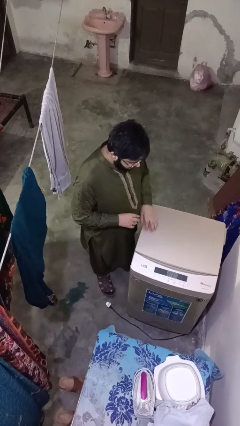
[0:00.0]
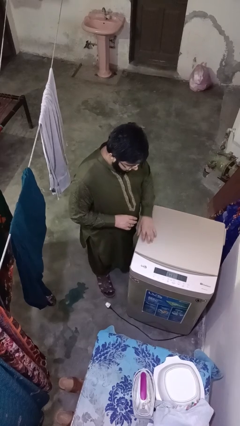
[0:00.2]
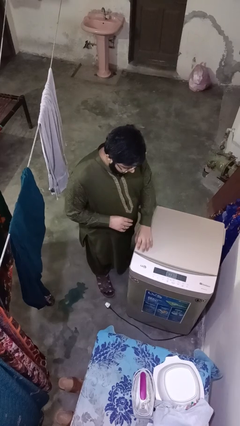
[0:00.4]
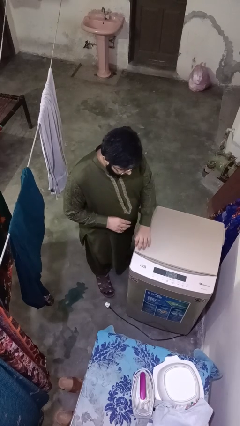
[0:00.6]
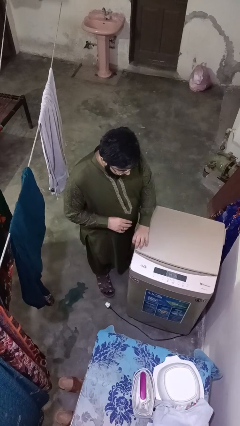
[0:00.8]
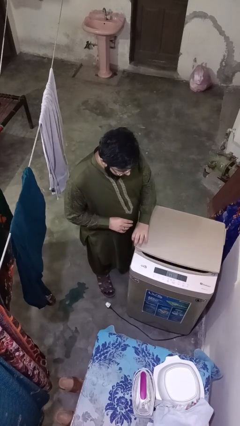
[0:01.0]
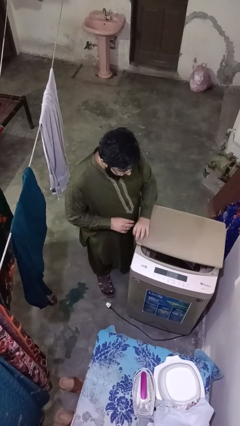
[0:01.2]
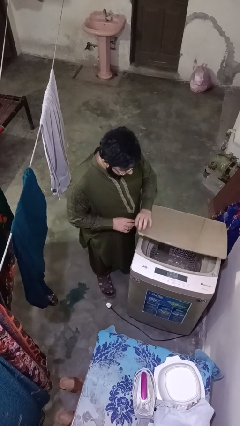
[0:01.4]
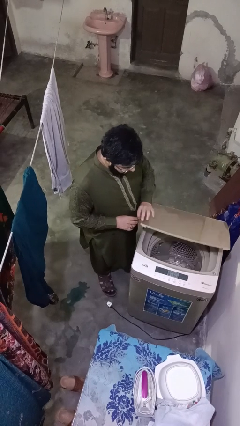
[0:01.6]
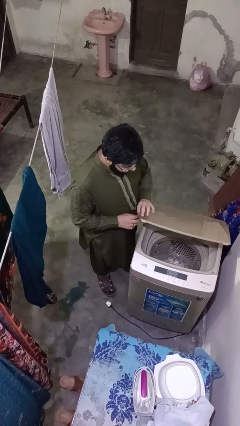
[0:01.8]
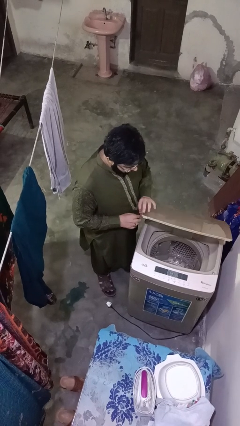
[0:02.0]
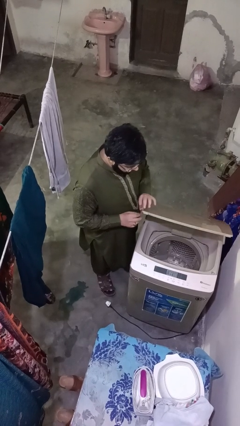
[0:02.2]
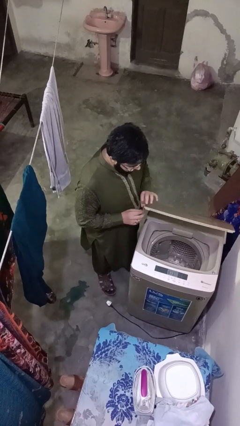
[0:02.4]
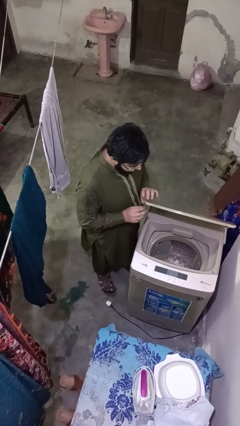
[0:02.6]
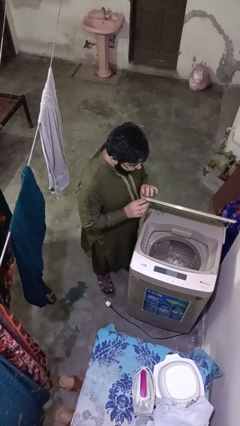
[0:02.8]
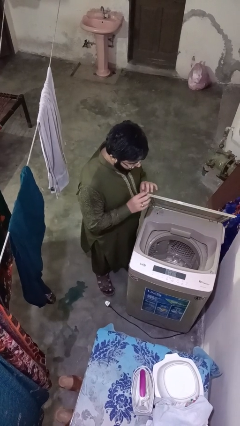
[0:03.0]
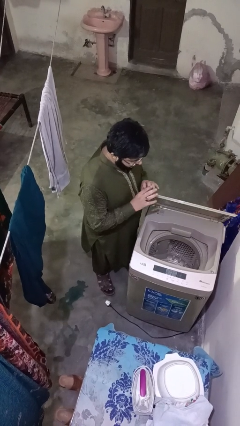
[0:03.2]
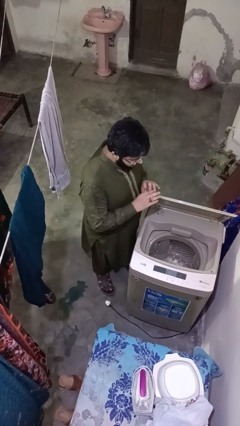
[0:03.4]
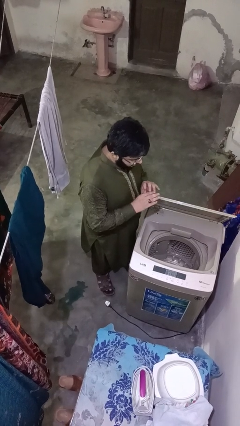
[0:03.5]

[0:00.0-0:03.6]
person opens clothes washer

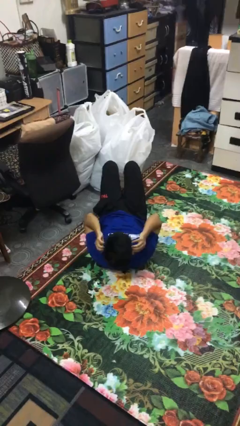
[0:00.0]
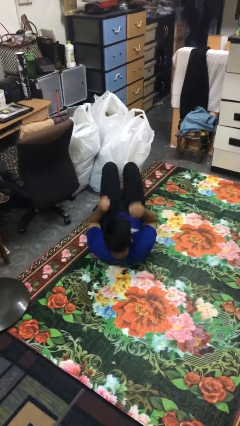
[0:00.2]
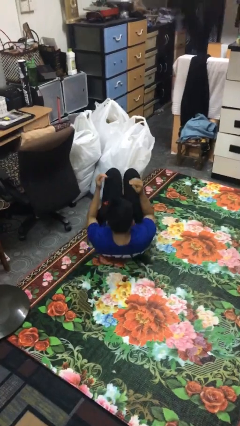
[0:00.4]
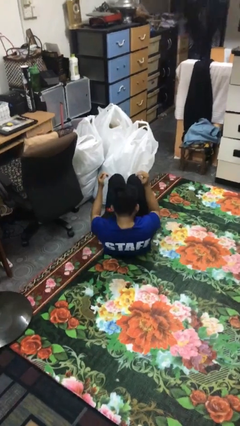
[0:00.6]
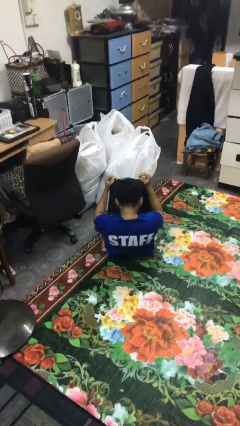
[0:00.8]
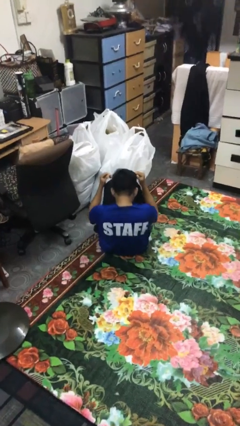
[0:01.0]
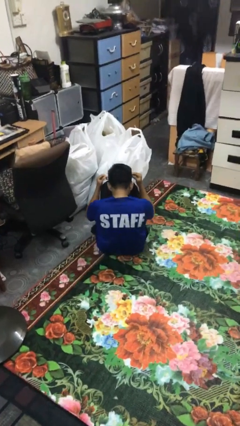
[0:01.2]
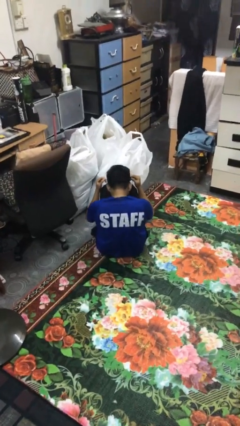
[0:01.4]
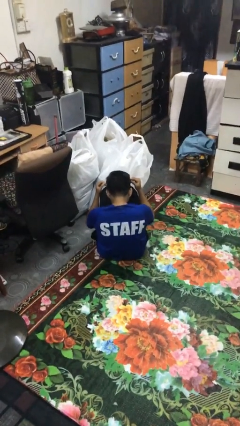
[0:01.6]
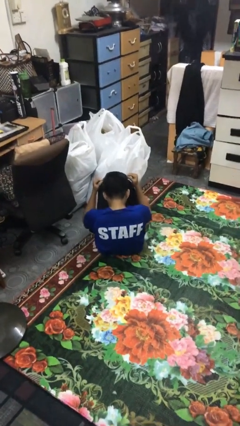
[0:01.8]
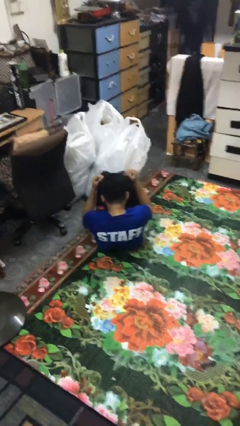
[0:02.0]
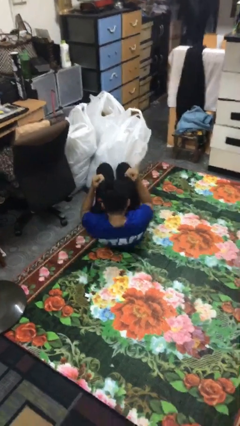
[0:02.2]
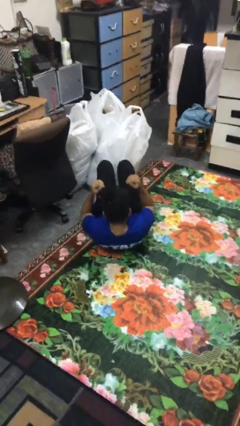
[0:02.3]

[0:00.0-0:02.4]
person exercises with situp

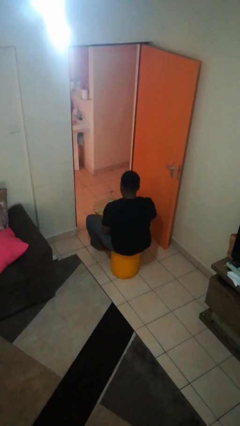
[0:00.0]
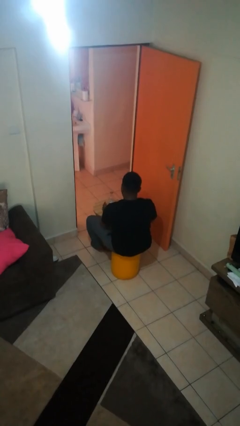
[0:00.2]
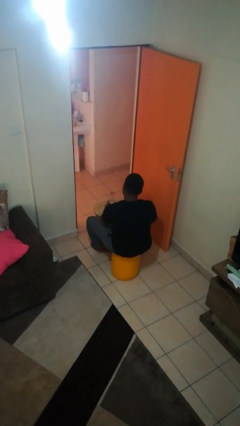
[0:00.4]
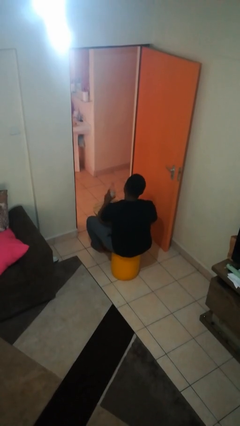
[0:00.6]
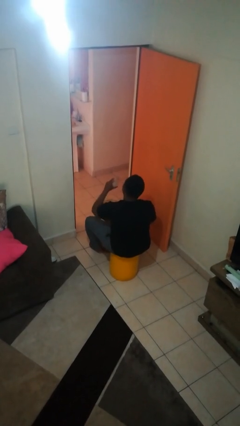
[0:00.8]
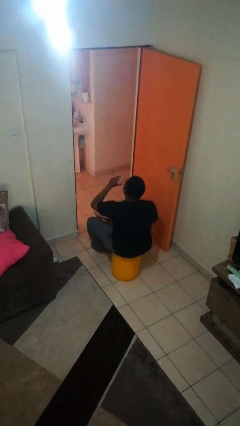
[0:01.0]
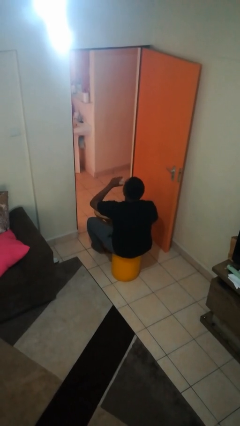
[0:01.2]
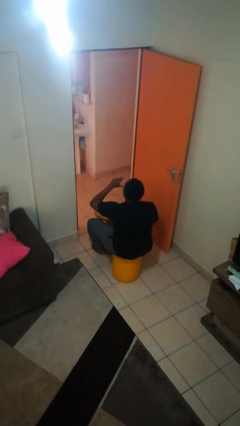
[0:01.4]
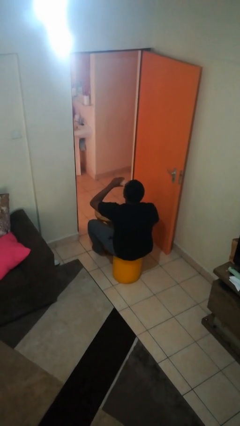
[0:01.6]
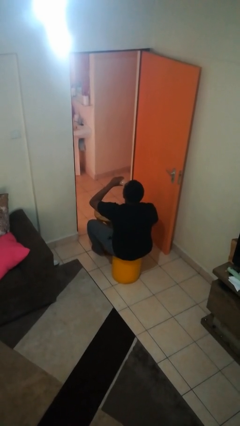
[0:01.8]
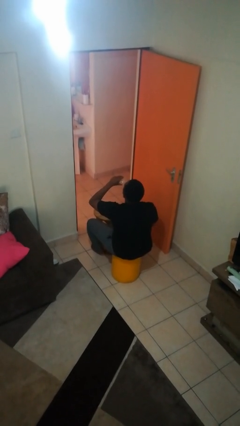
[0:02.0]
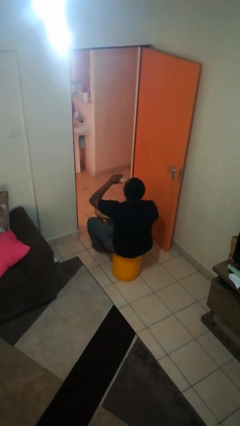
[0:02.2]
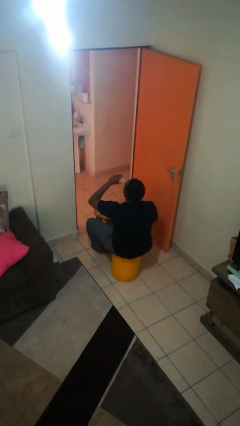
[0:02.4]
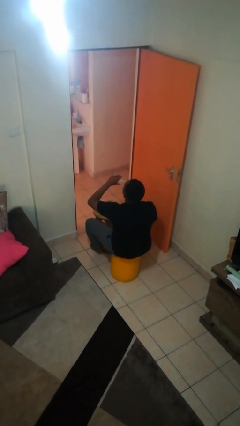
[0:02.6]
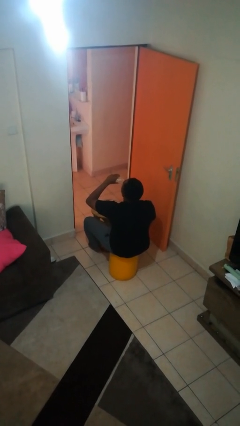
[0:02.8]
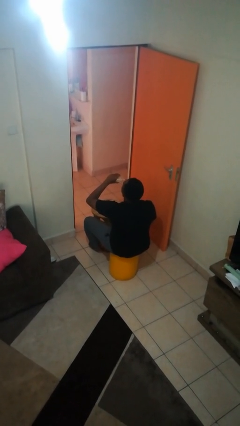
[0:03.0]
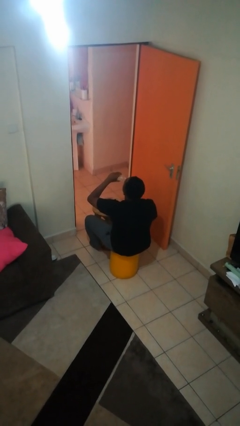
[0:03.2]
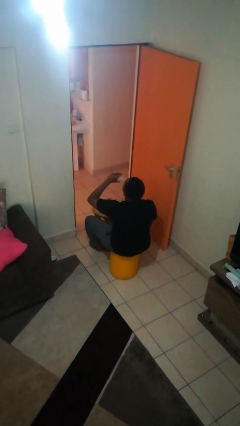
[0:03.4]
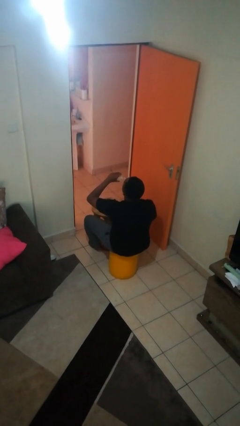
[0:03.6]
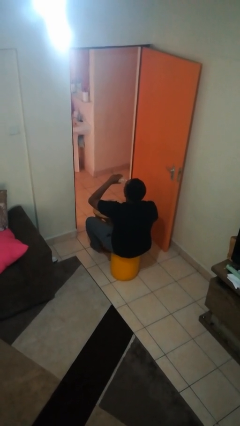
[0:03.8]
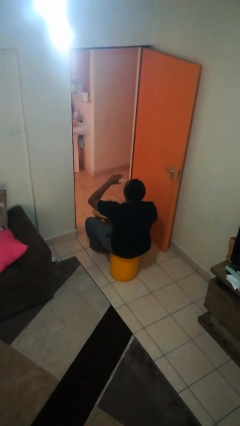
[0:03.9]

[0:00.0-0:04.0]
person drinks from bottle

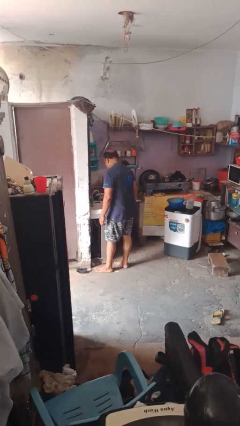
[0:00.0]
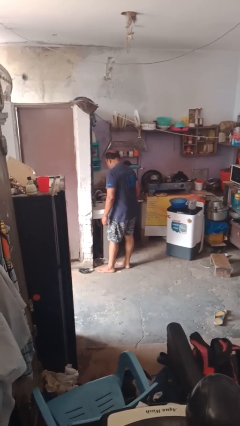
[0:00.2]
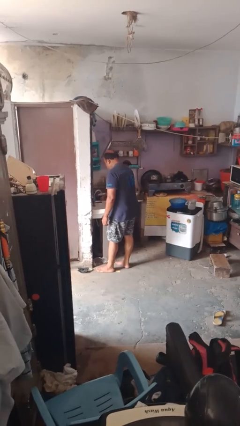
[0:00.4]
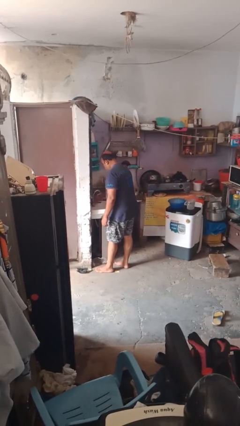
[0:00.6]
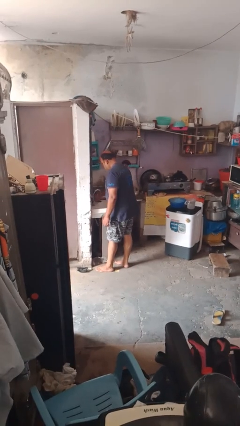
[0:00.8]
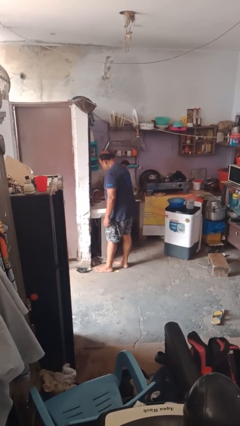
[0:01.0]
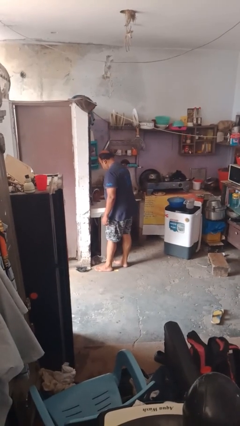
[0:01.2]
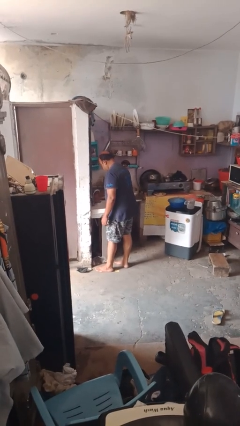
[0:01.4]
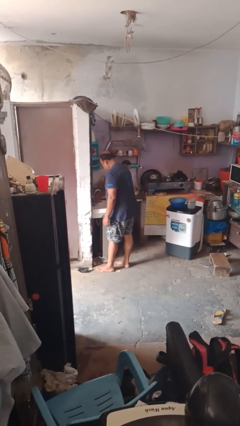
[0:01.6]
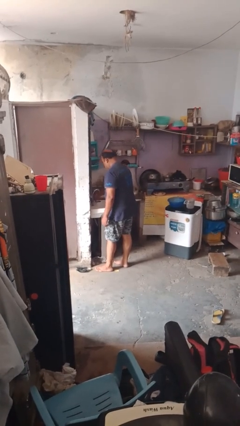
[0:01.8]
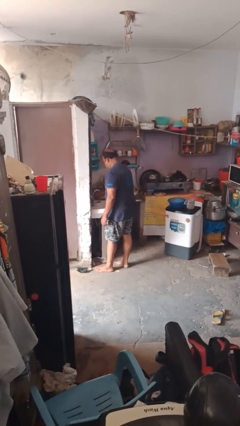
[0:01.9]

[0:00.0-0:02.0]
person turns off faucet

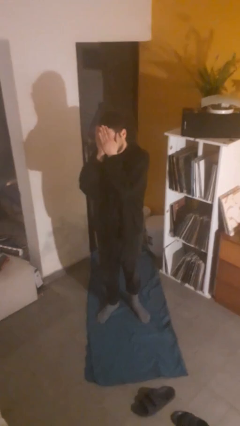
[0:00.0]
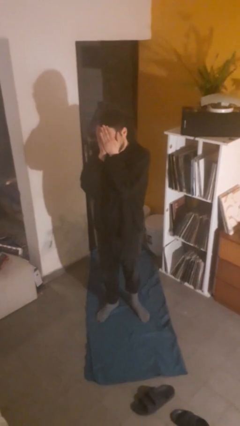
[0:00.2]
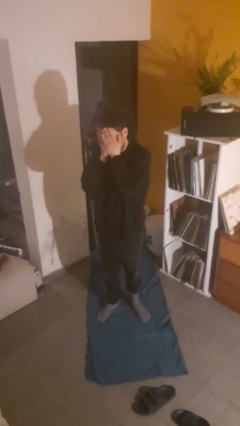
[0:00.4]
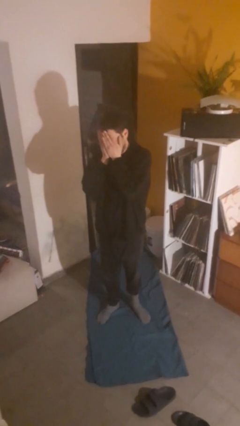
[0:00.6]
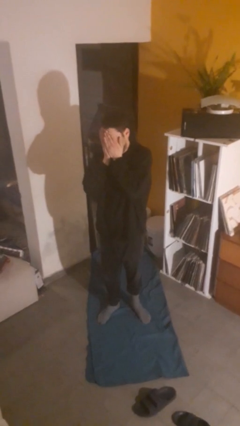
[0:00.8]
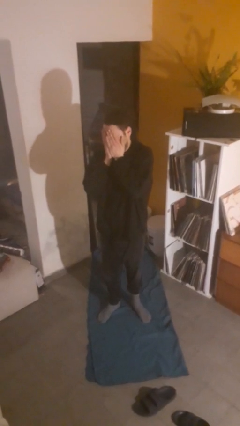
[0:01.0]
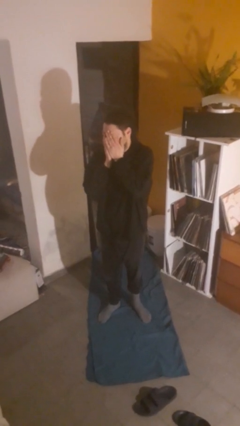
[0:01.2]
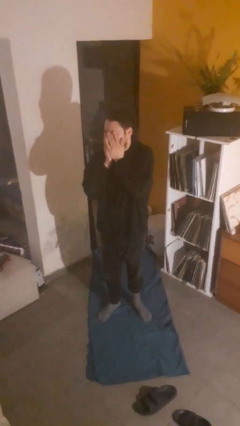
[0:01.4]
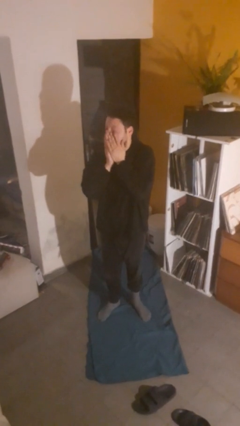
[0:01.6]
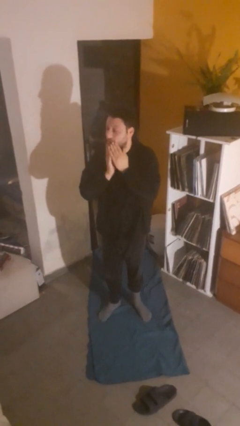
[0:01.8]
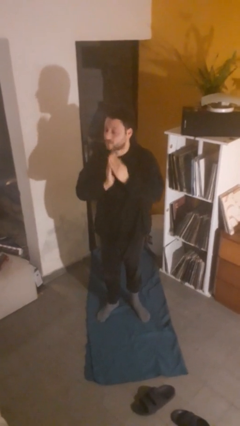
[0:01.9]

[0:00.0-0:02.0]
person covers face with hands

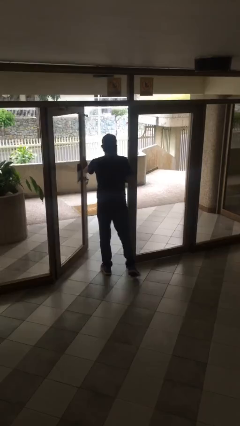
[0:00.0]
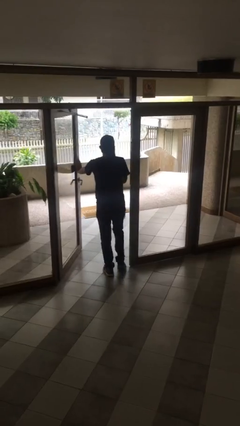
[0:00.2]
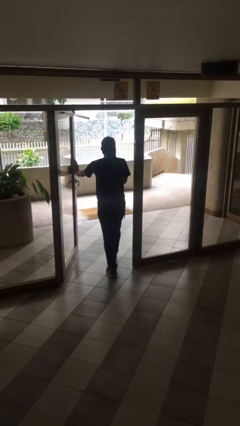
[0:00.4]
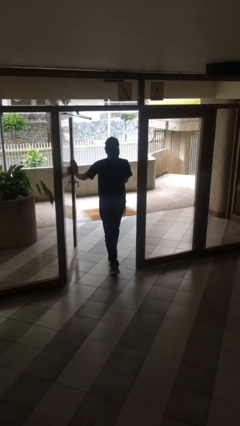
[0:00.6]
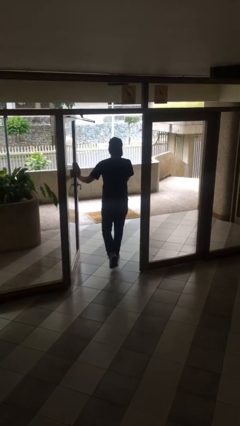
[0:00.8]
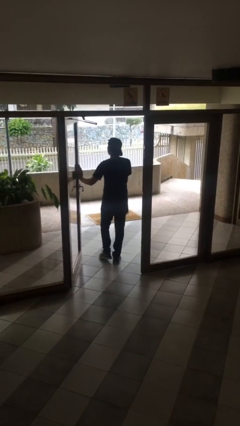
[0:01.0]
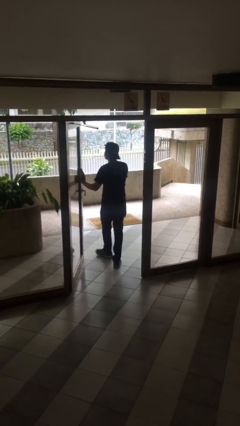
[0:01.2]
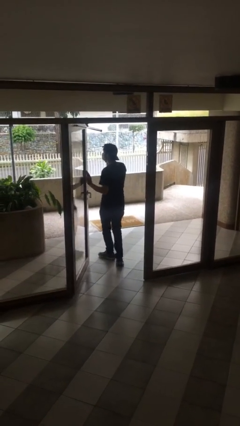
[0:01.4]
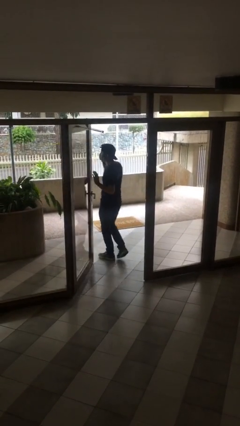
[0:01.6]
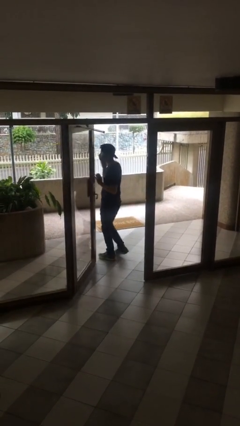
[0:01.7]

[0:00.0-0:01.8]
person exits scene through structure

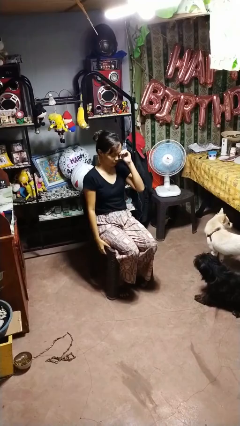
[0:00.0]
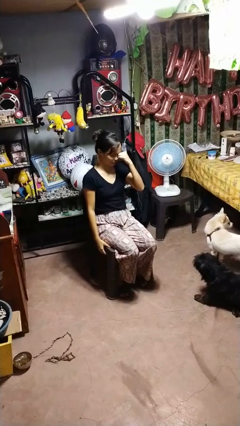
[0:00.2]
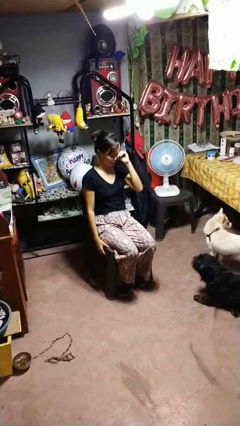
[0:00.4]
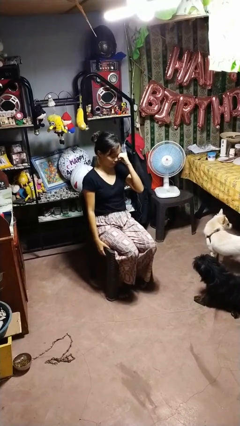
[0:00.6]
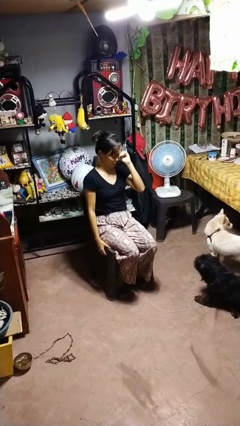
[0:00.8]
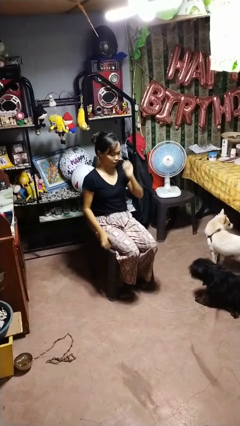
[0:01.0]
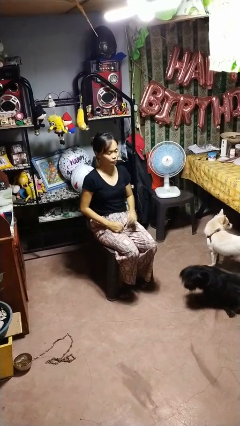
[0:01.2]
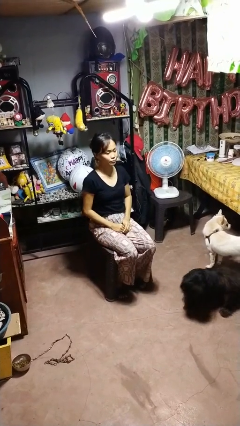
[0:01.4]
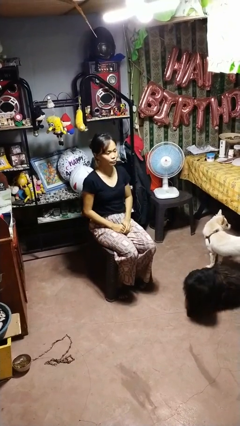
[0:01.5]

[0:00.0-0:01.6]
person rubs eyes
